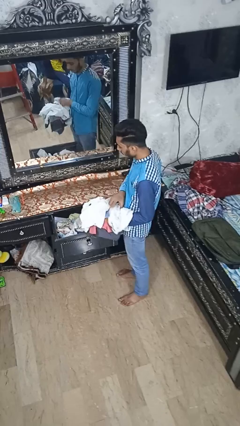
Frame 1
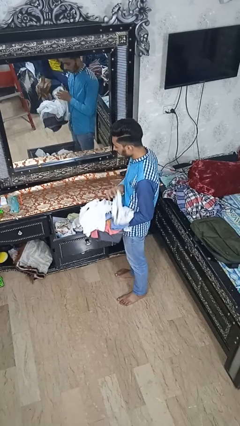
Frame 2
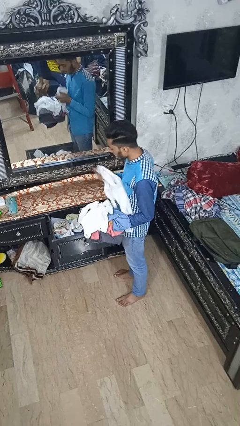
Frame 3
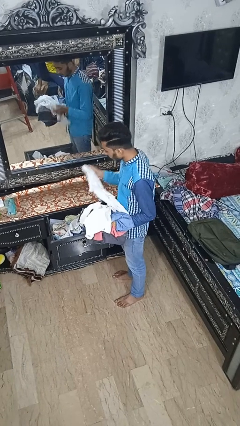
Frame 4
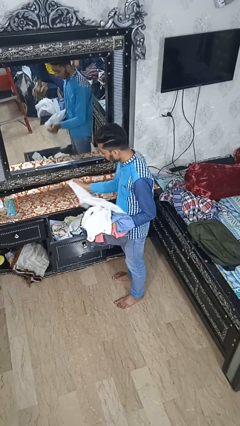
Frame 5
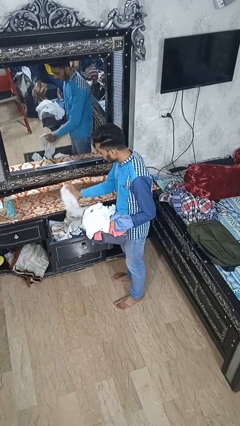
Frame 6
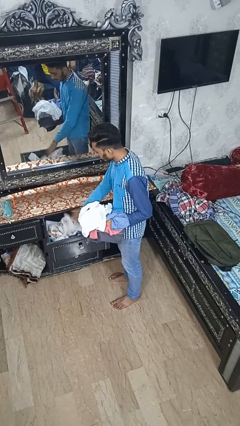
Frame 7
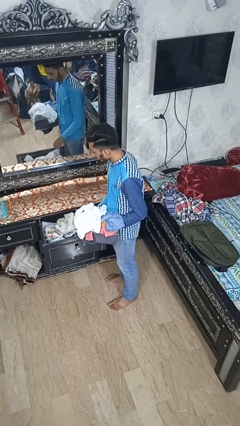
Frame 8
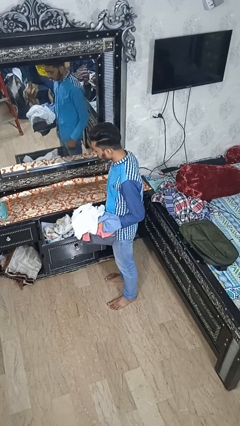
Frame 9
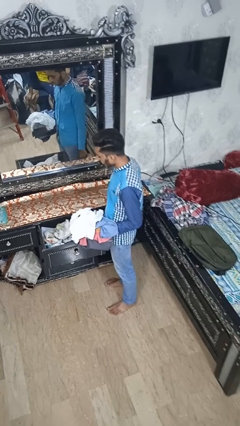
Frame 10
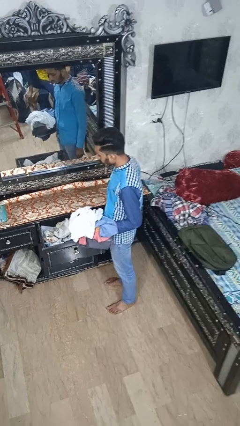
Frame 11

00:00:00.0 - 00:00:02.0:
person puts clothes into dresser

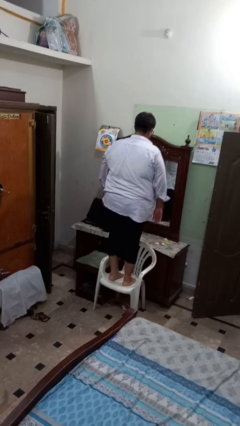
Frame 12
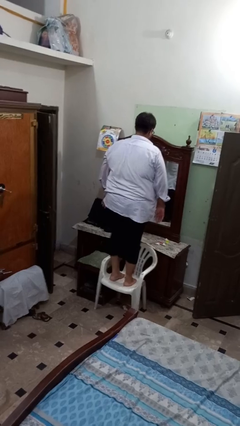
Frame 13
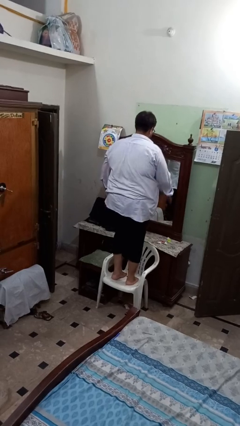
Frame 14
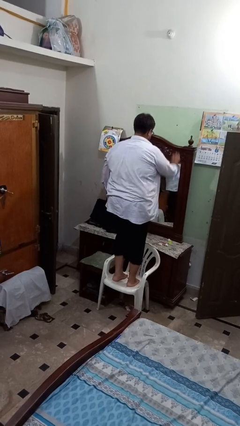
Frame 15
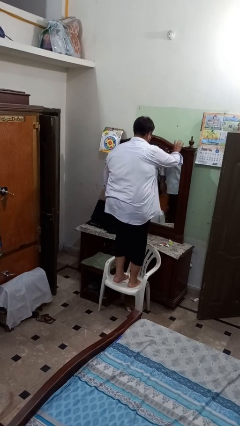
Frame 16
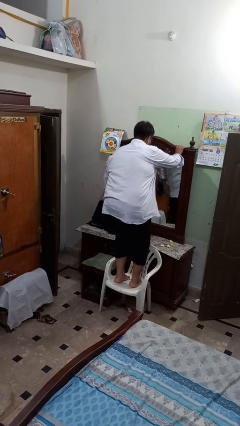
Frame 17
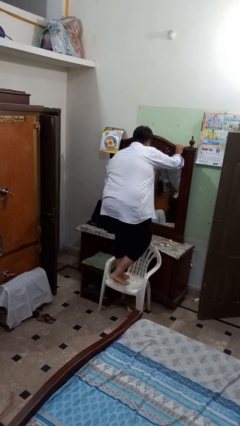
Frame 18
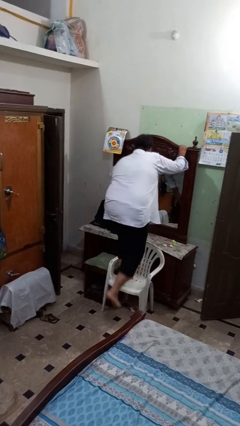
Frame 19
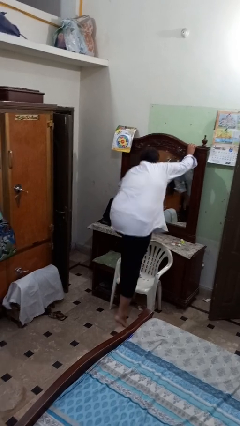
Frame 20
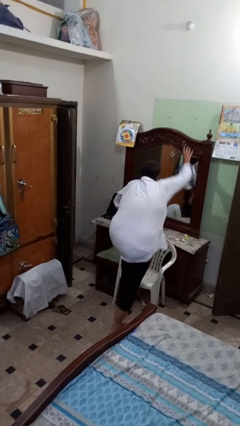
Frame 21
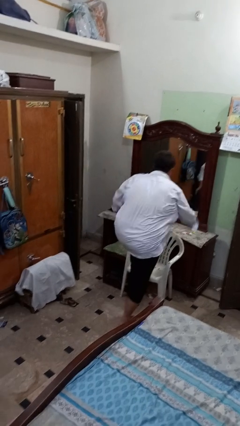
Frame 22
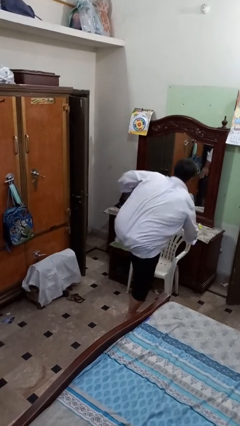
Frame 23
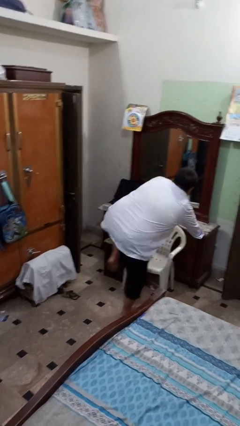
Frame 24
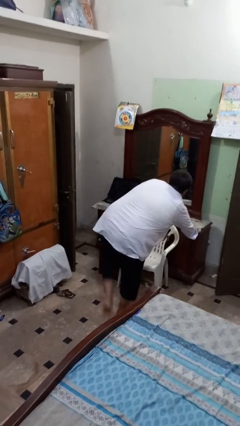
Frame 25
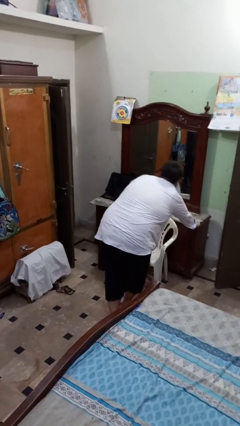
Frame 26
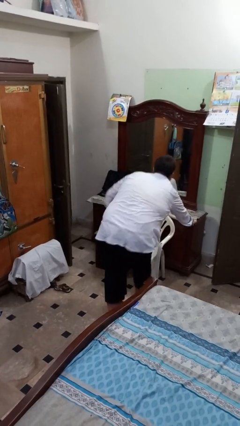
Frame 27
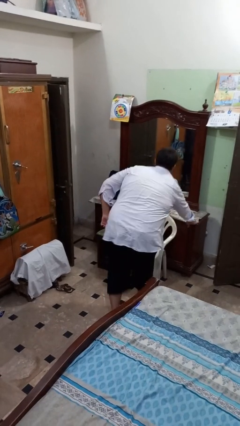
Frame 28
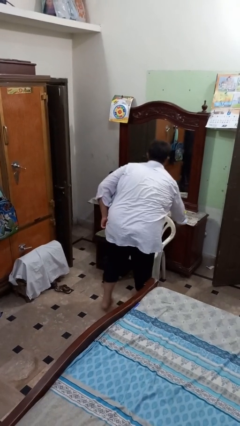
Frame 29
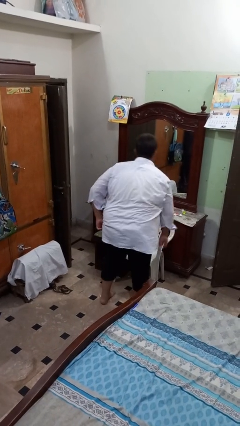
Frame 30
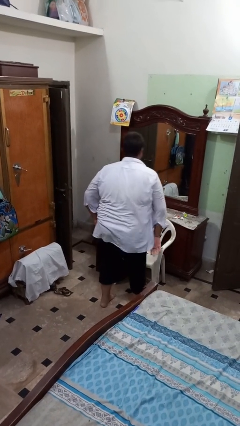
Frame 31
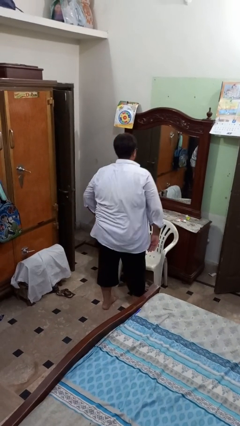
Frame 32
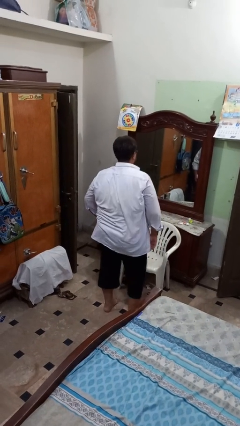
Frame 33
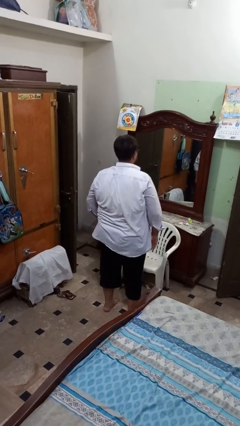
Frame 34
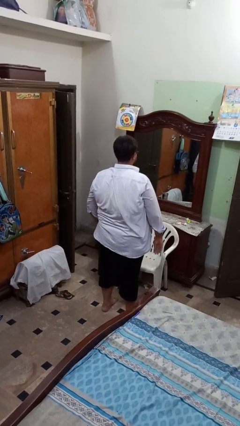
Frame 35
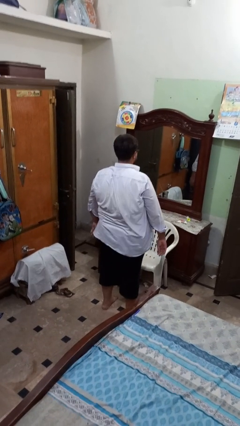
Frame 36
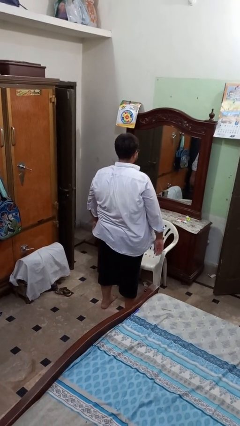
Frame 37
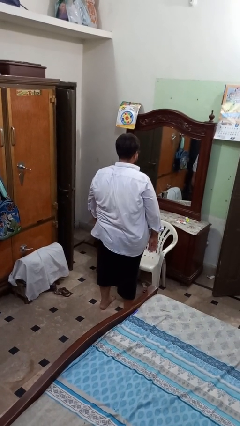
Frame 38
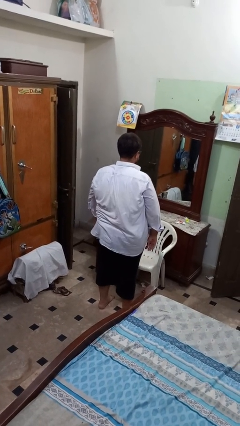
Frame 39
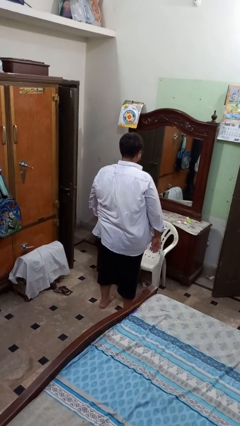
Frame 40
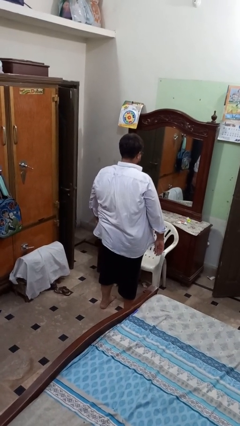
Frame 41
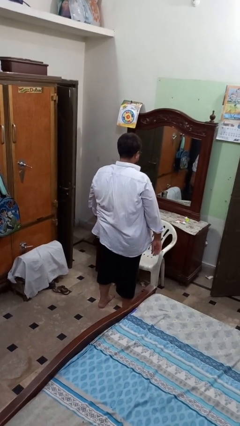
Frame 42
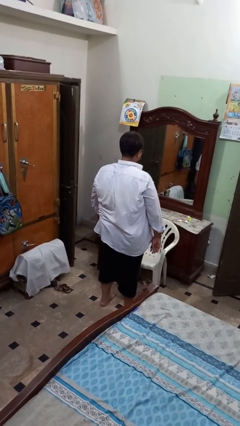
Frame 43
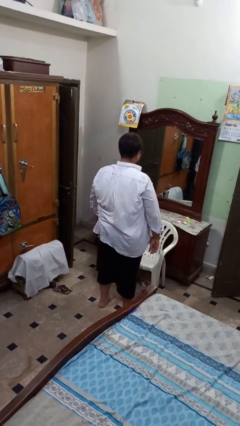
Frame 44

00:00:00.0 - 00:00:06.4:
person climbs off chair

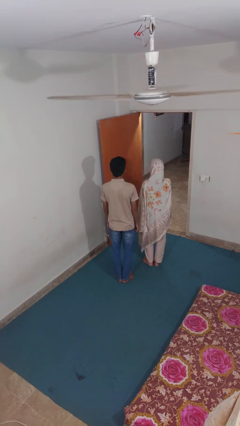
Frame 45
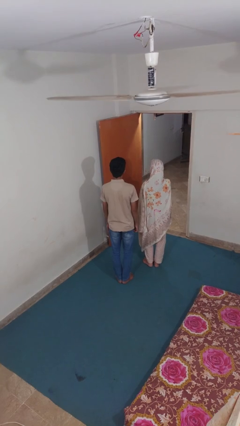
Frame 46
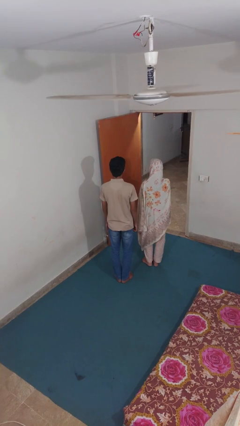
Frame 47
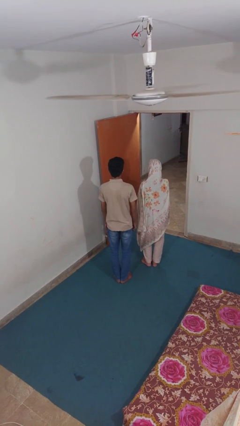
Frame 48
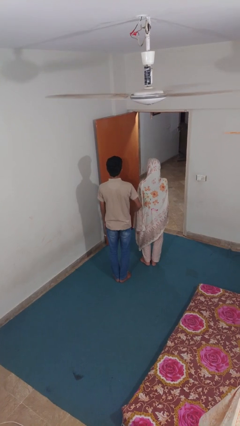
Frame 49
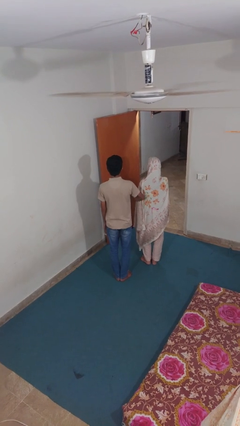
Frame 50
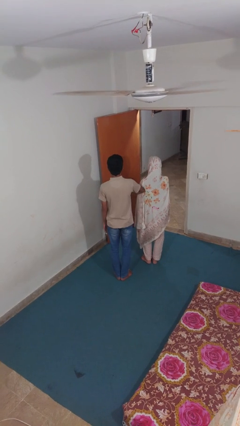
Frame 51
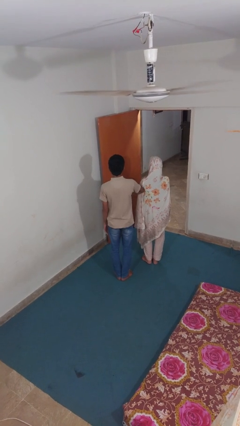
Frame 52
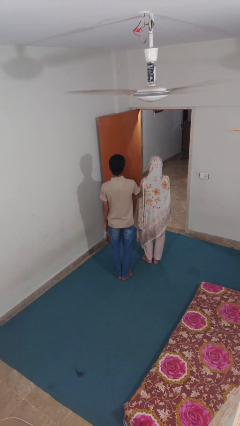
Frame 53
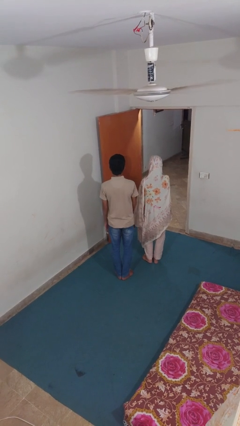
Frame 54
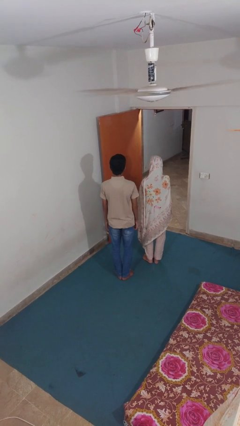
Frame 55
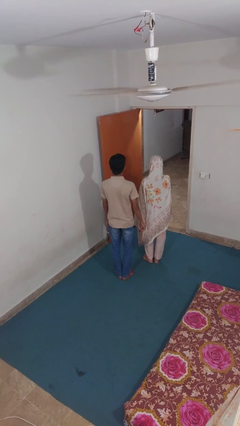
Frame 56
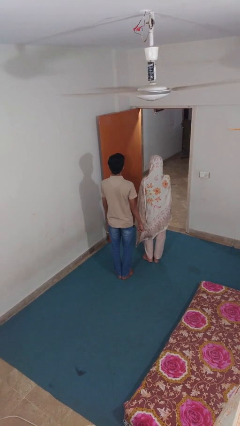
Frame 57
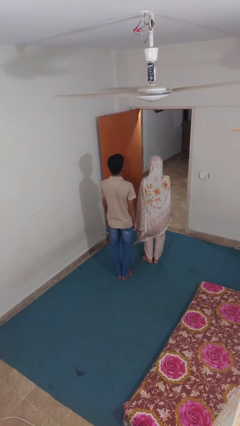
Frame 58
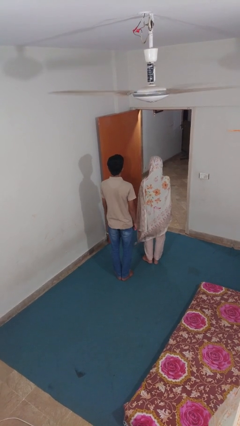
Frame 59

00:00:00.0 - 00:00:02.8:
person nudges person with elbow

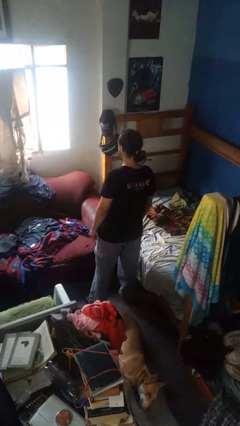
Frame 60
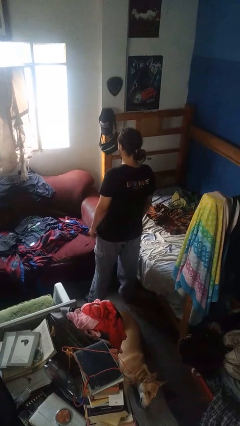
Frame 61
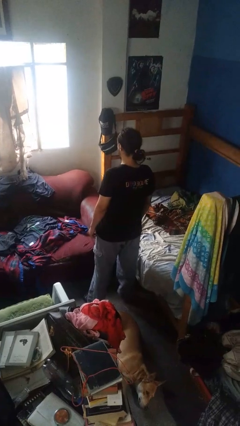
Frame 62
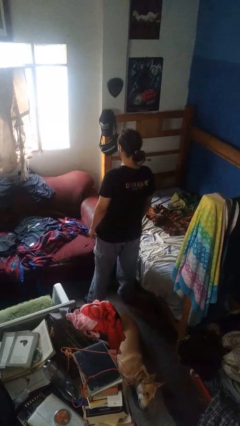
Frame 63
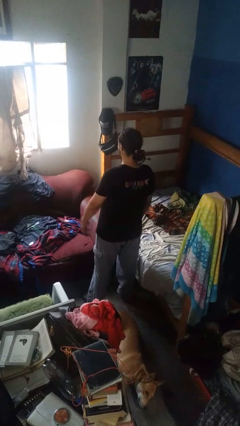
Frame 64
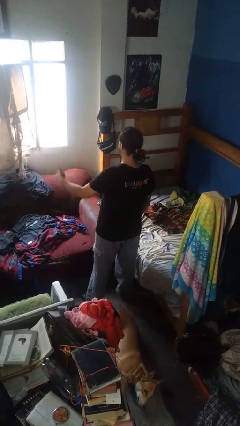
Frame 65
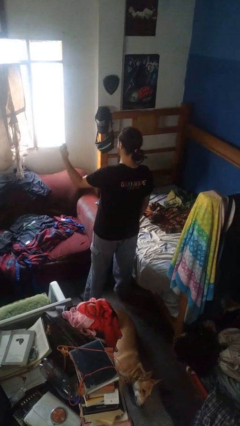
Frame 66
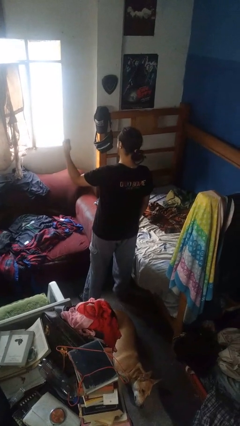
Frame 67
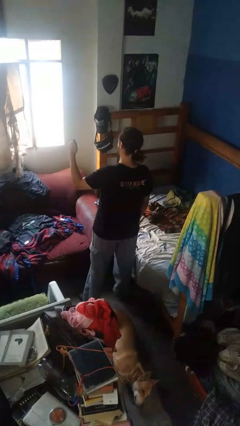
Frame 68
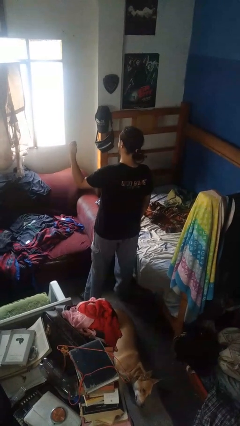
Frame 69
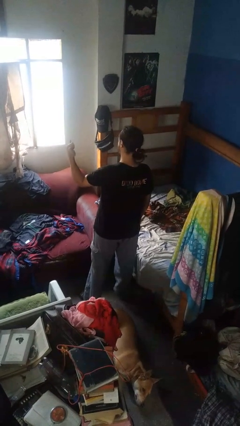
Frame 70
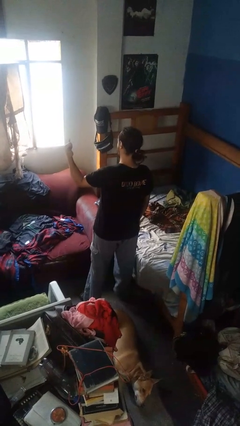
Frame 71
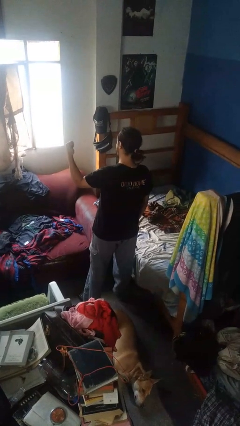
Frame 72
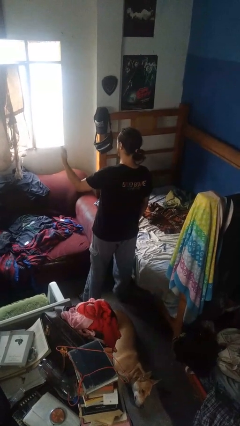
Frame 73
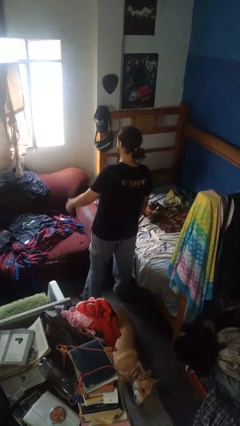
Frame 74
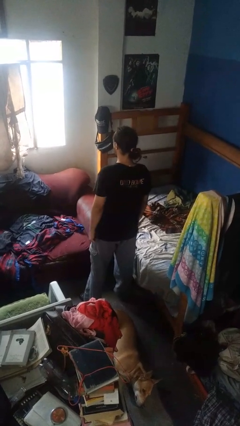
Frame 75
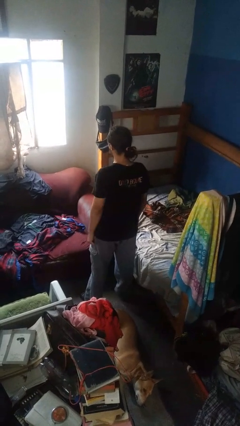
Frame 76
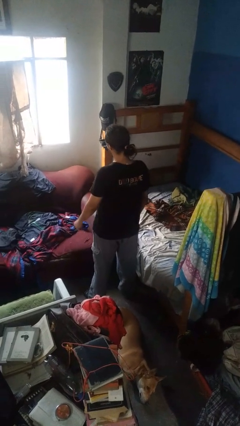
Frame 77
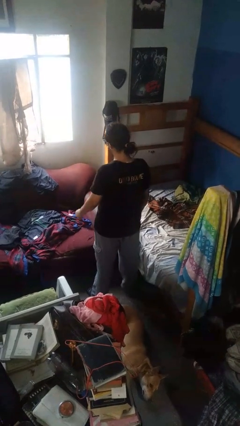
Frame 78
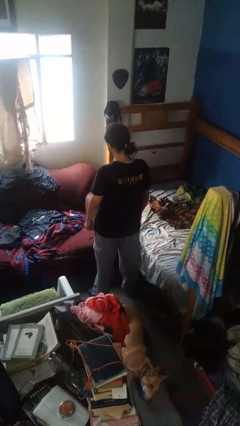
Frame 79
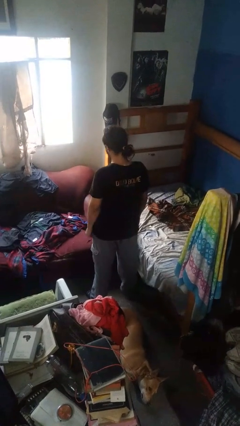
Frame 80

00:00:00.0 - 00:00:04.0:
person gestures hang loose

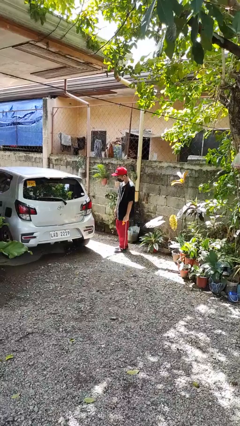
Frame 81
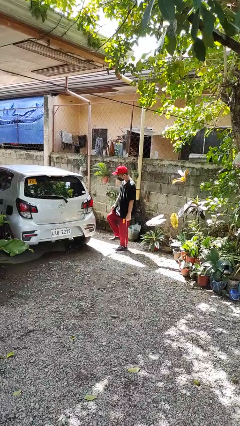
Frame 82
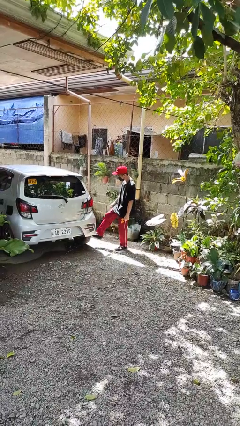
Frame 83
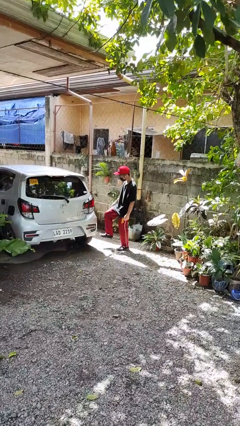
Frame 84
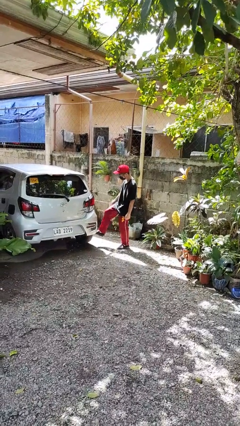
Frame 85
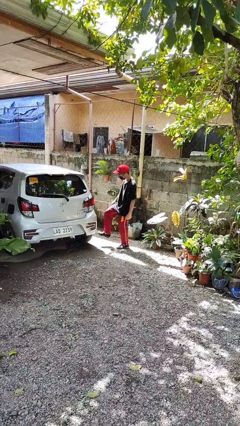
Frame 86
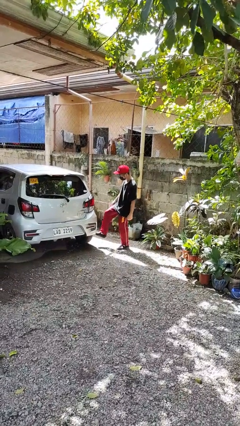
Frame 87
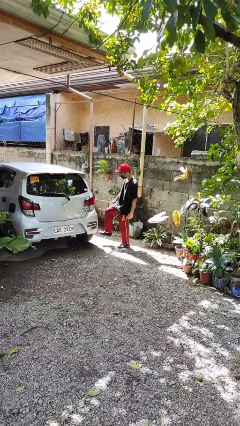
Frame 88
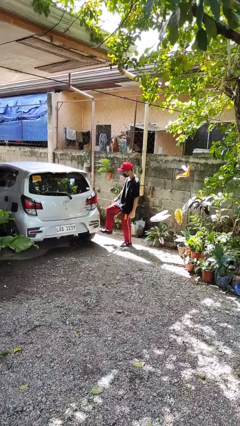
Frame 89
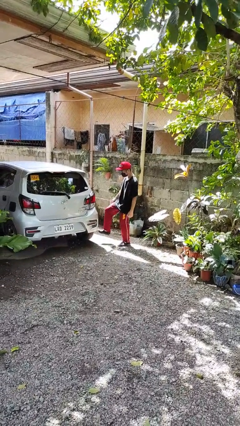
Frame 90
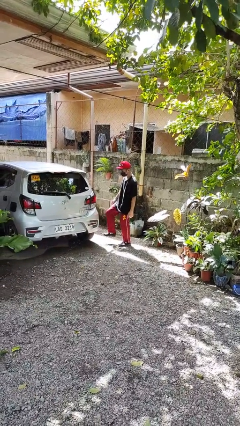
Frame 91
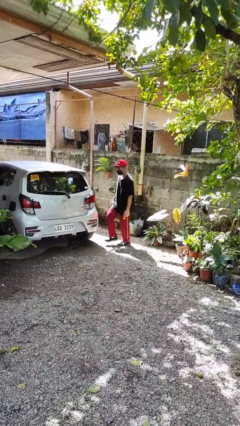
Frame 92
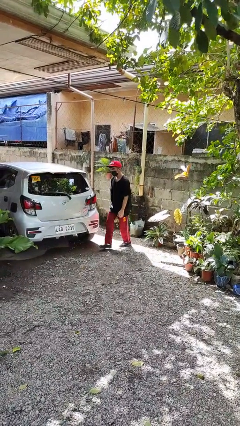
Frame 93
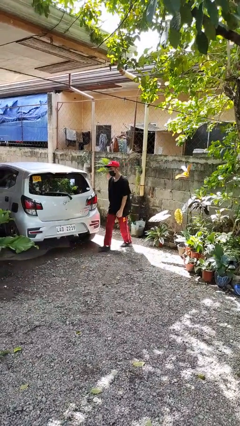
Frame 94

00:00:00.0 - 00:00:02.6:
person kicks car tires

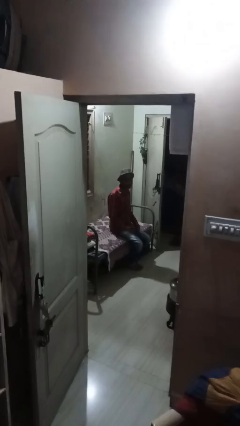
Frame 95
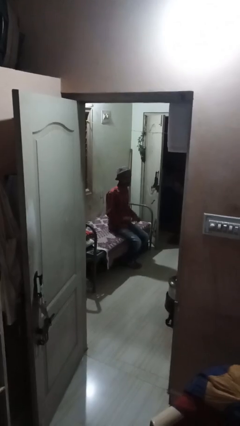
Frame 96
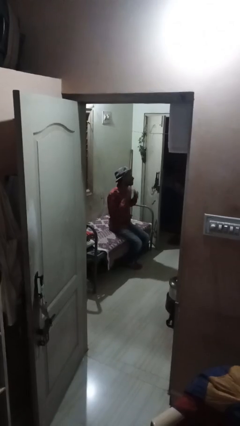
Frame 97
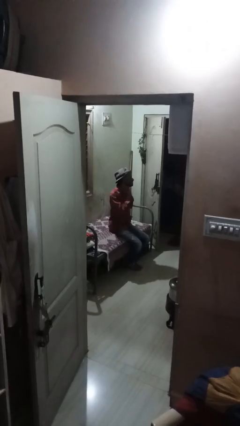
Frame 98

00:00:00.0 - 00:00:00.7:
person rubs neck
